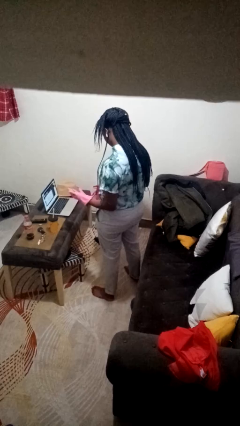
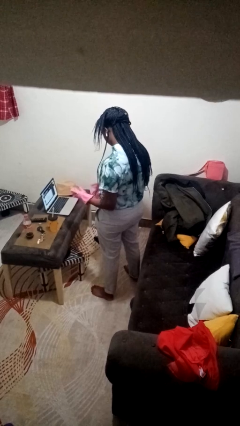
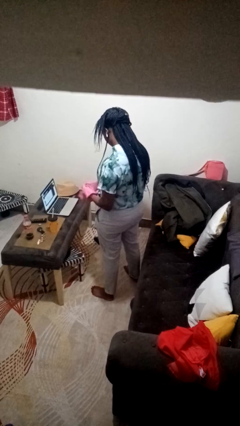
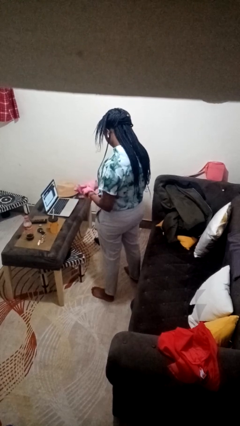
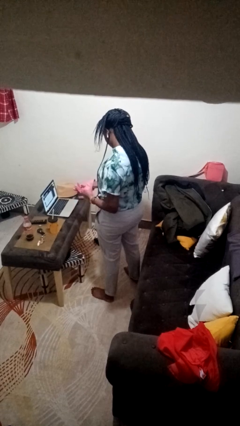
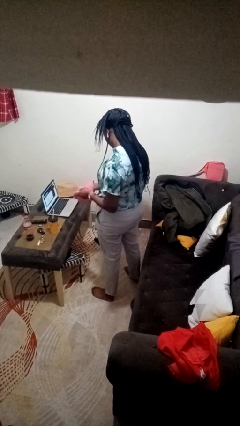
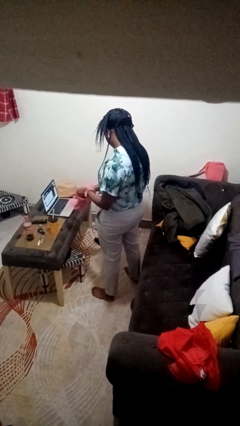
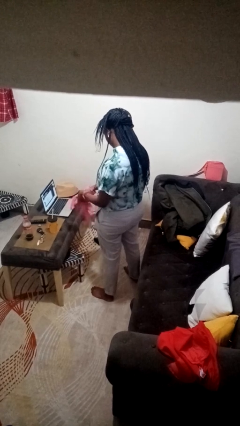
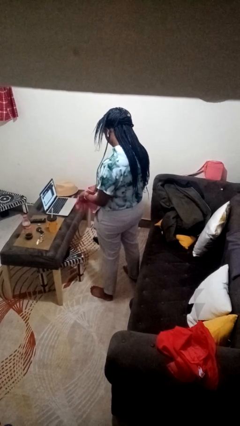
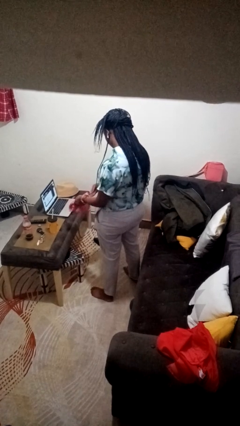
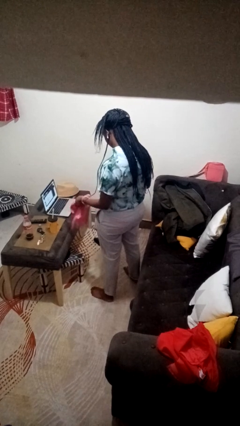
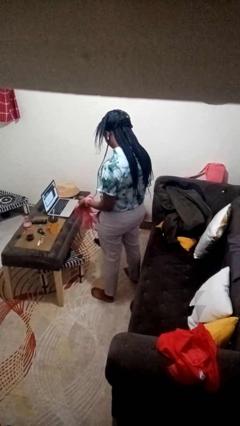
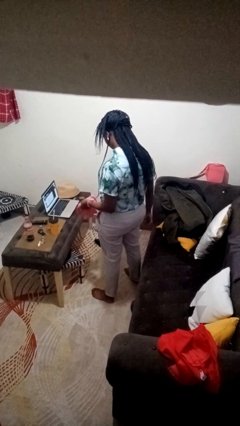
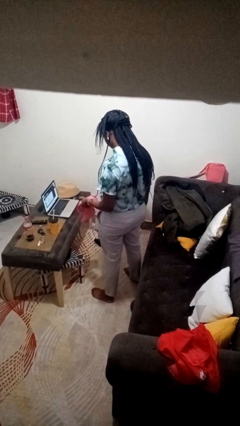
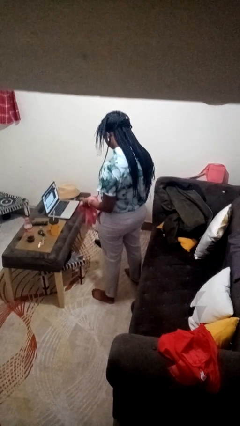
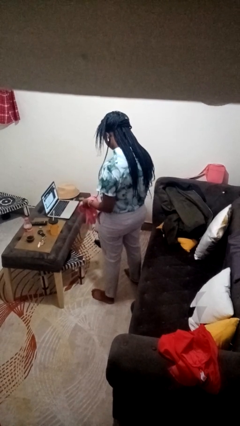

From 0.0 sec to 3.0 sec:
person takes off gloves

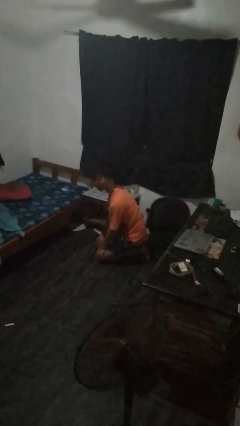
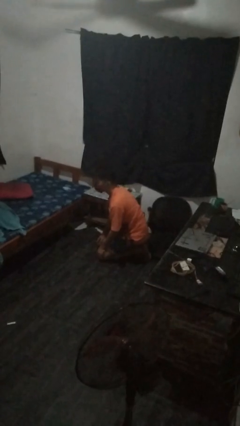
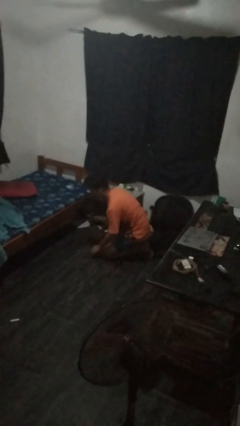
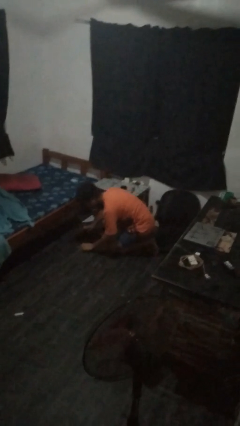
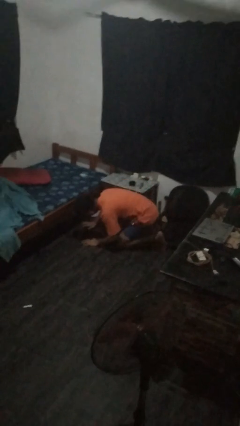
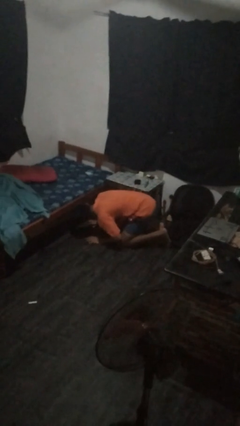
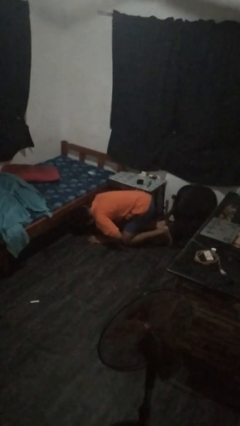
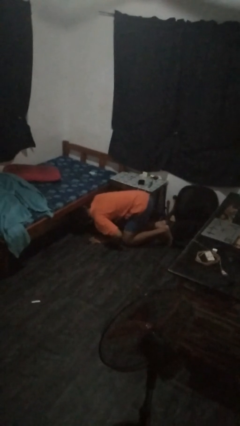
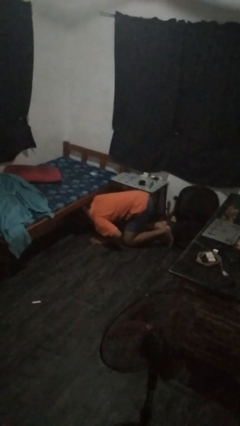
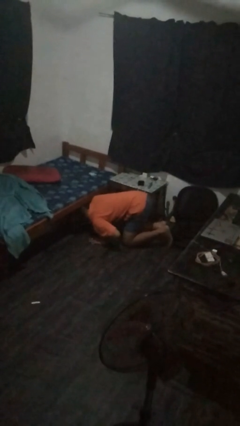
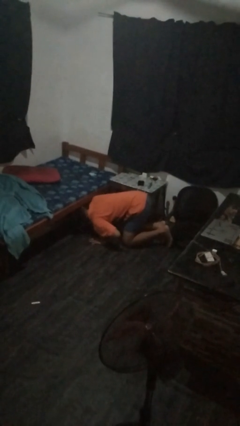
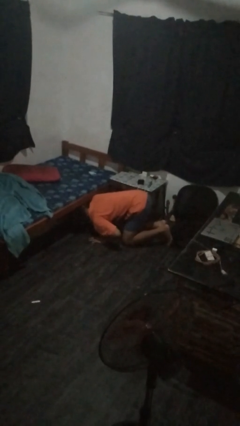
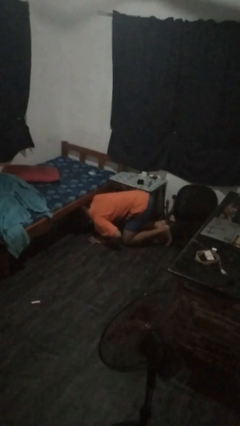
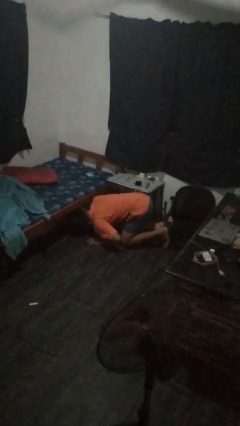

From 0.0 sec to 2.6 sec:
person searches under bed

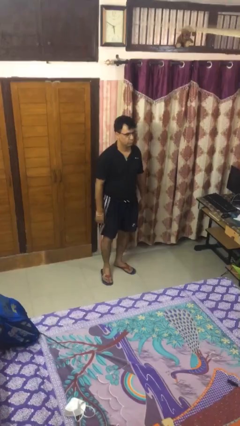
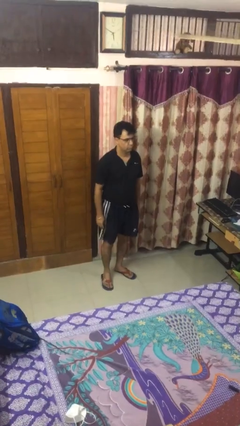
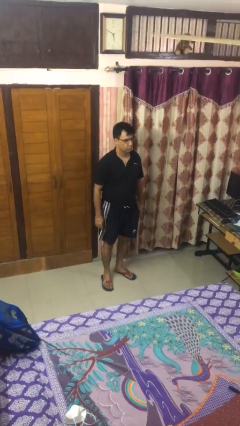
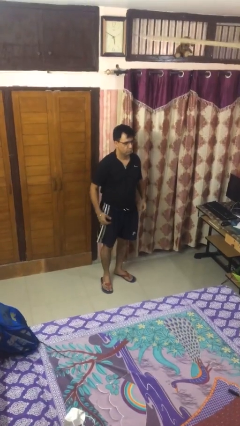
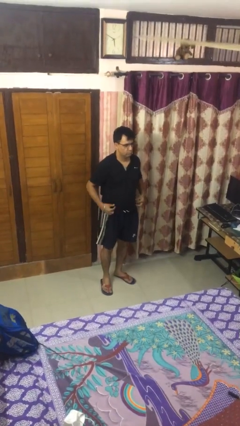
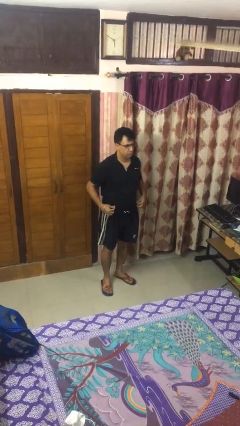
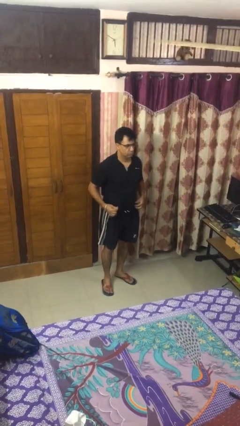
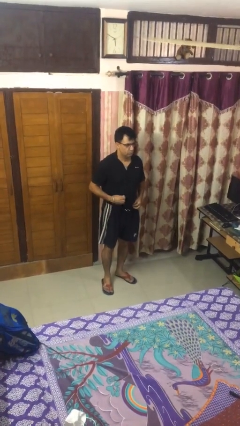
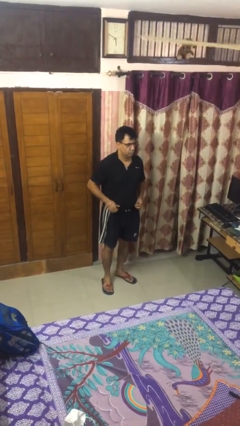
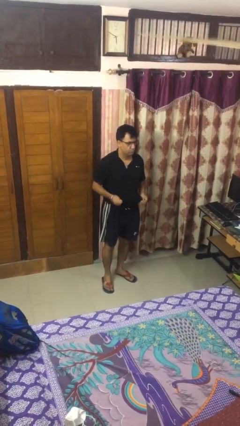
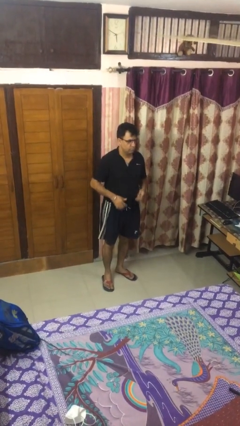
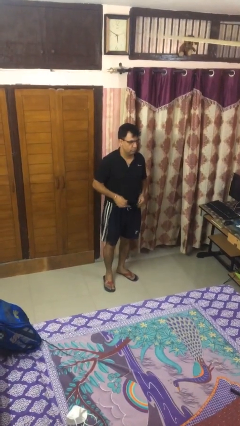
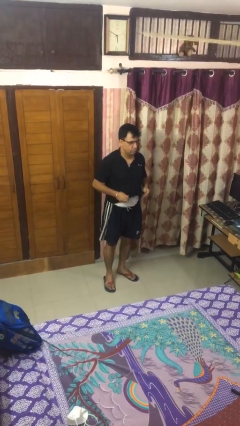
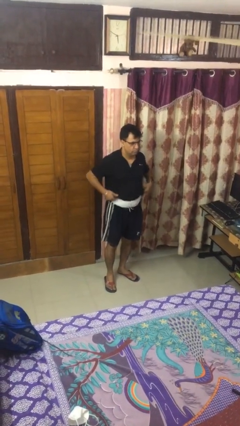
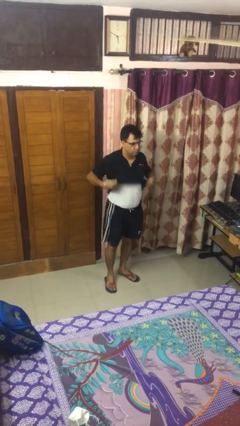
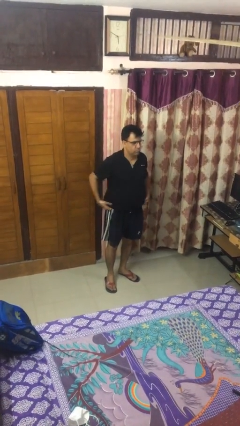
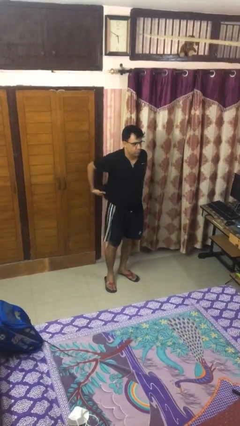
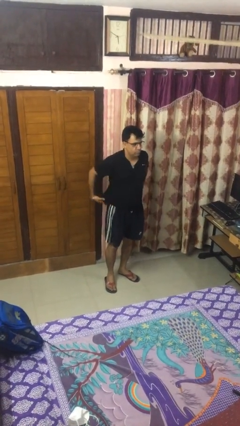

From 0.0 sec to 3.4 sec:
person untucks shirt

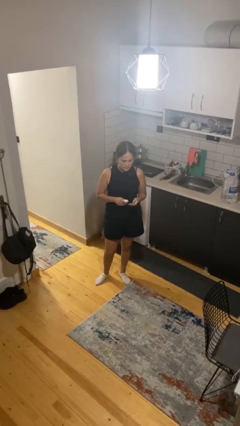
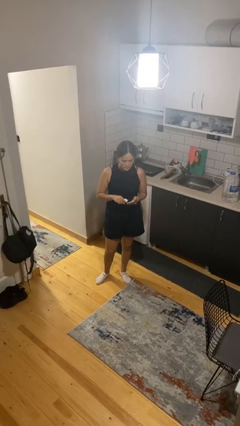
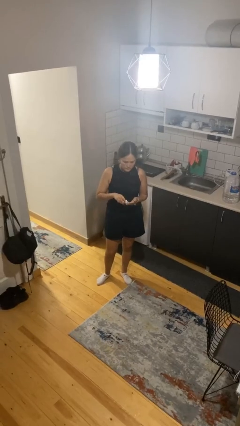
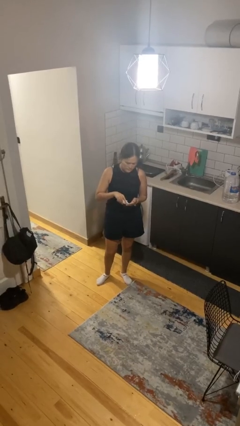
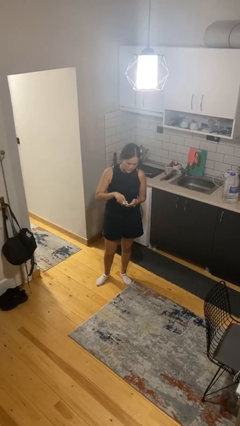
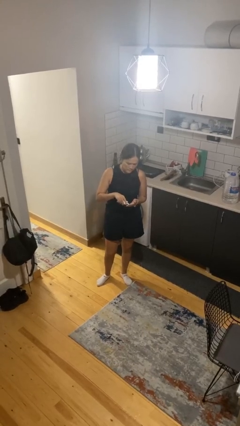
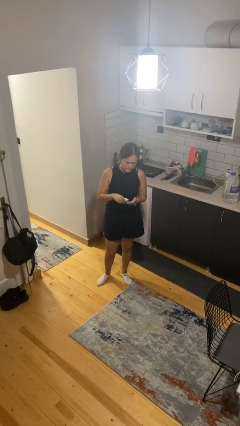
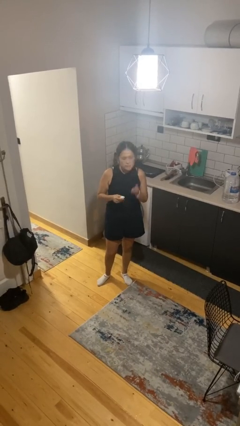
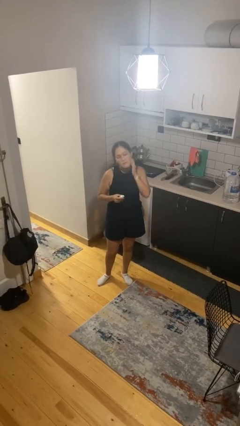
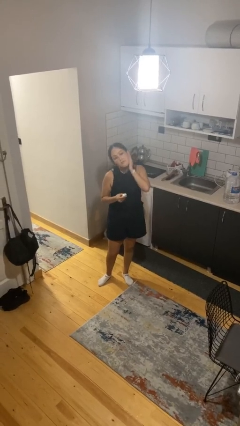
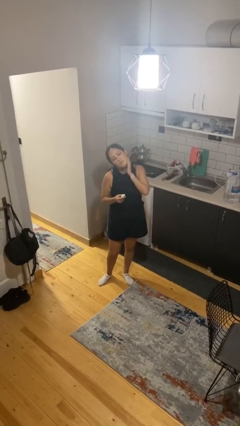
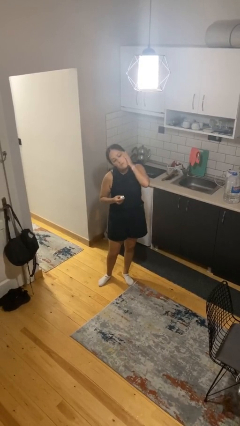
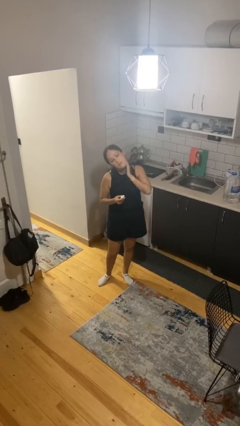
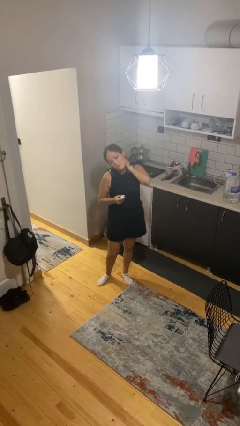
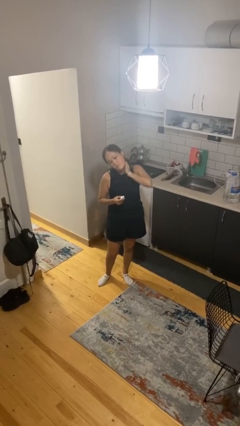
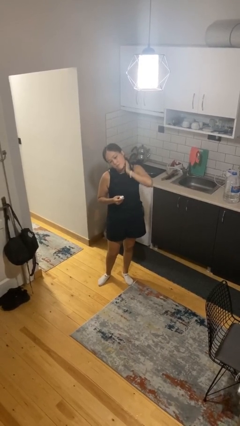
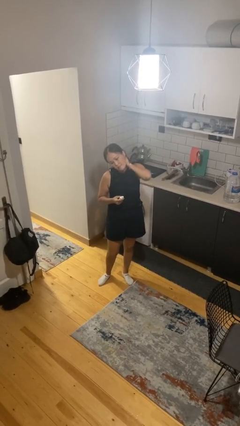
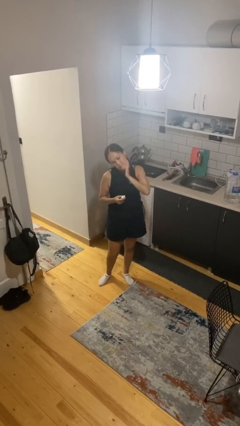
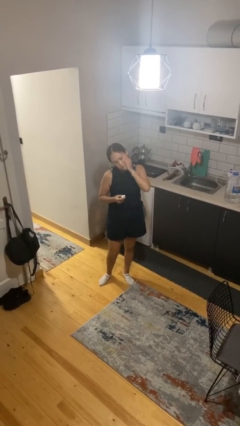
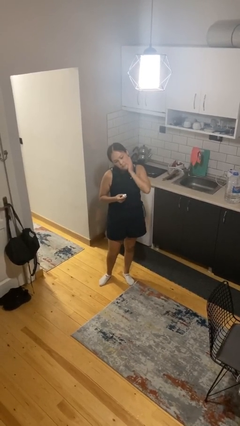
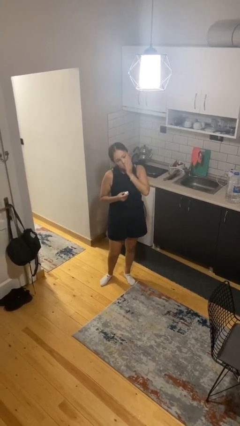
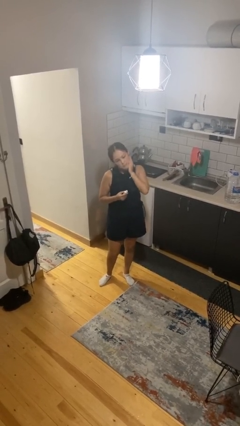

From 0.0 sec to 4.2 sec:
person applies sunscreen

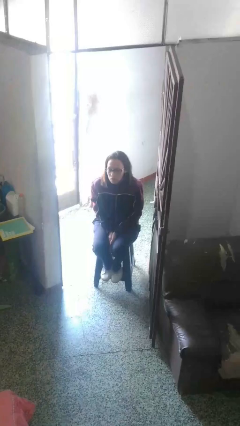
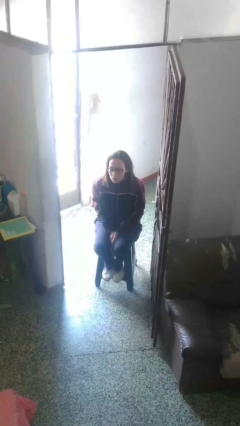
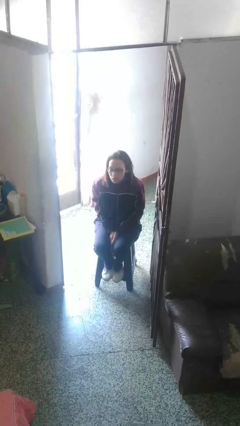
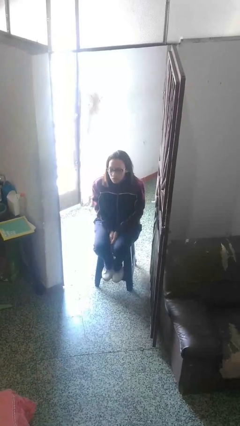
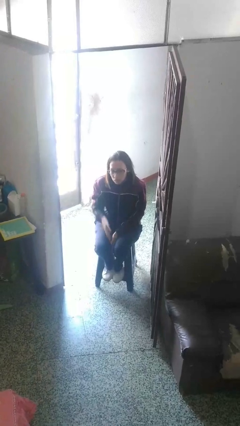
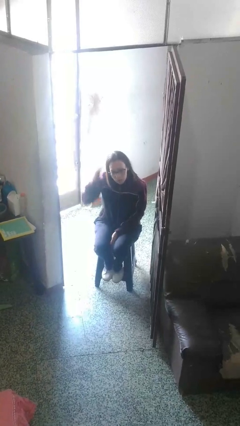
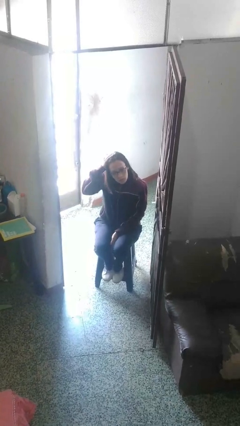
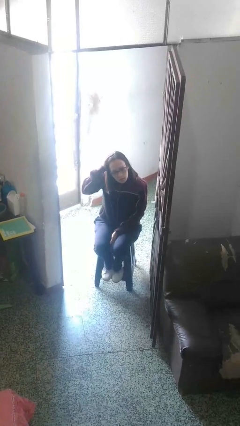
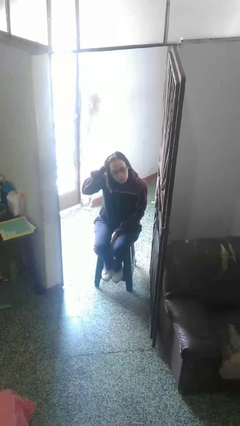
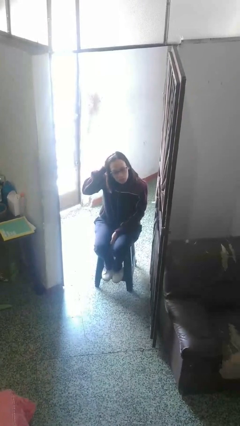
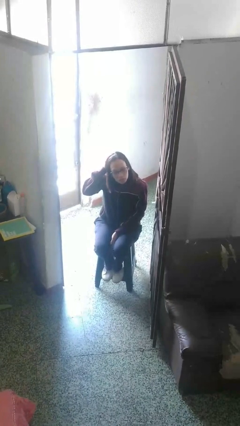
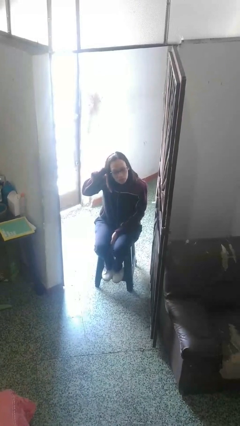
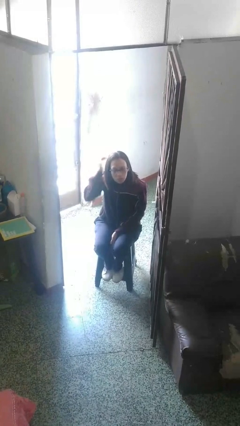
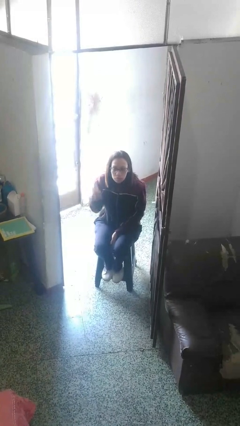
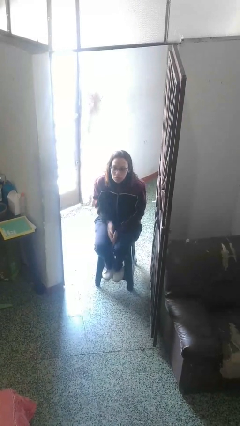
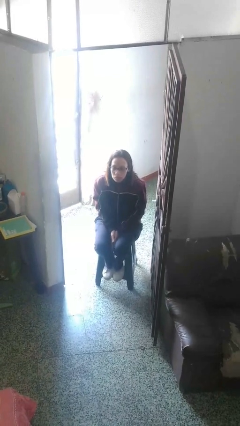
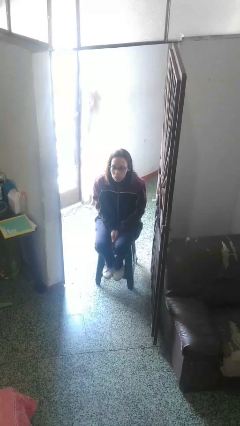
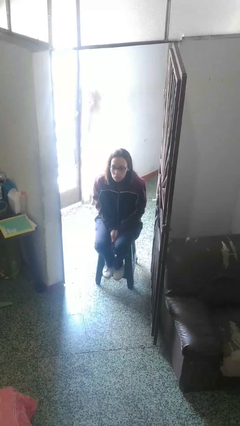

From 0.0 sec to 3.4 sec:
person pats head

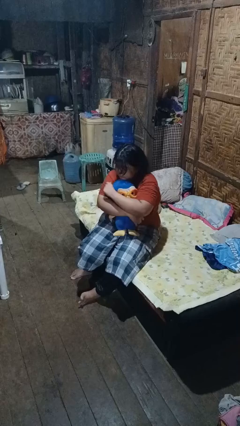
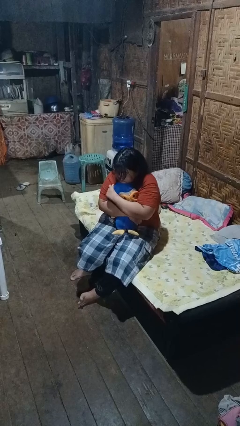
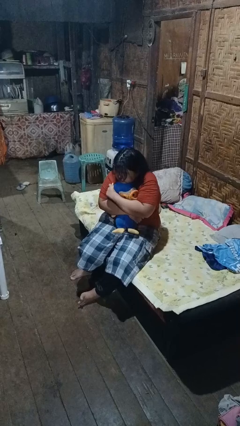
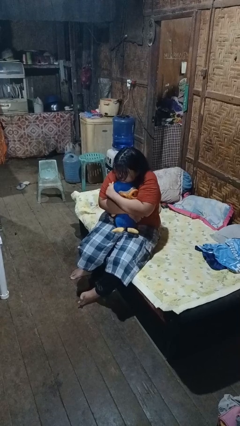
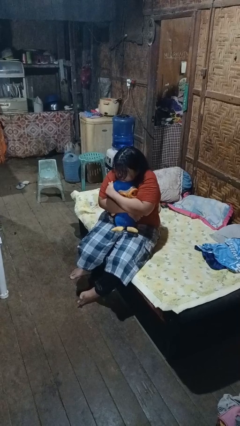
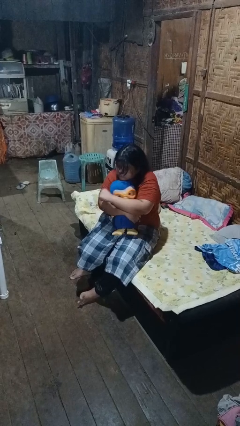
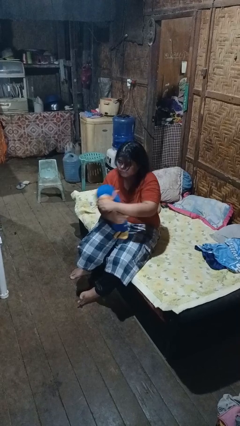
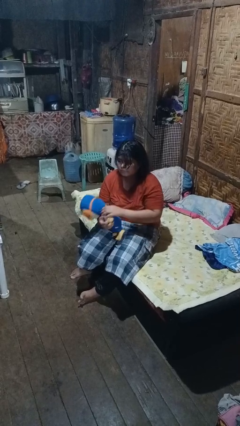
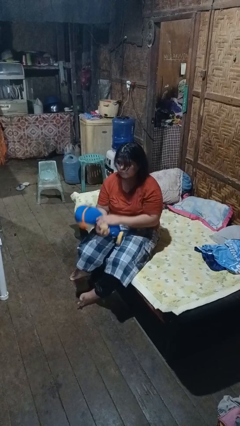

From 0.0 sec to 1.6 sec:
person hugs stuffed animal
